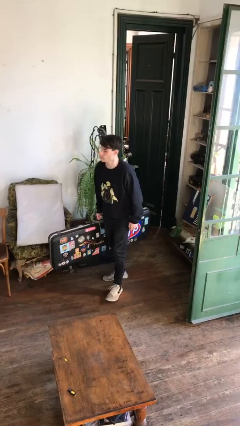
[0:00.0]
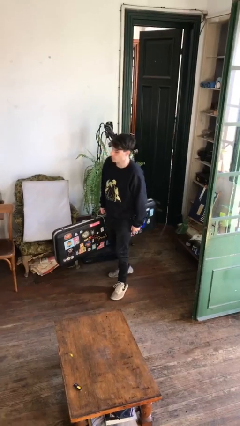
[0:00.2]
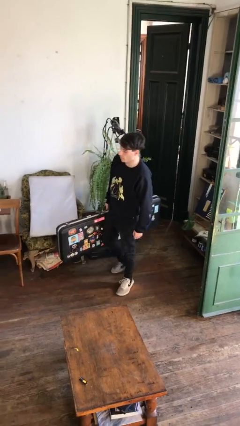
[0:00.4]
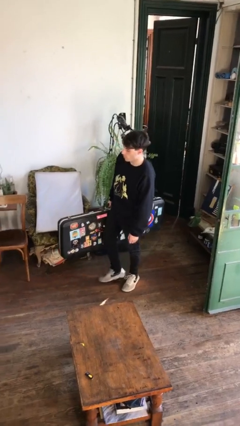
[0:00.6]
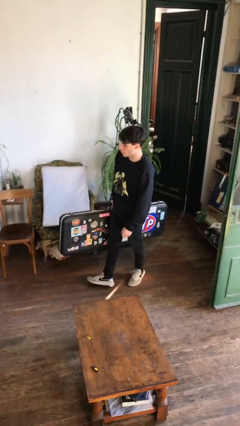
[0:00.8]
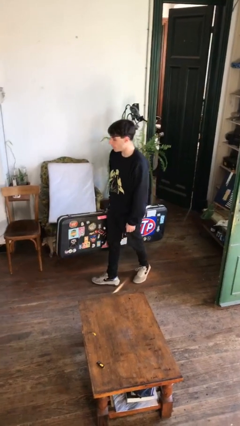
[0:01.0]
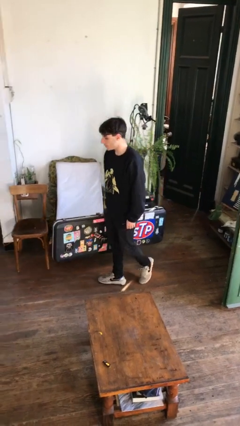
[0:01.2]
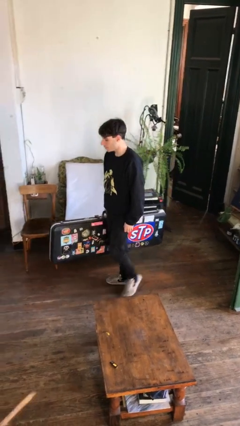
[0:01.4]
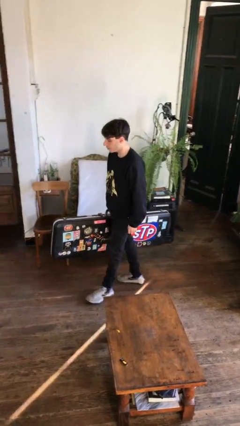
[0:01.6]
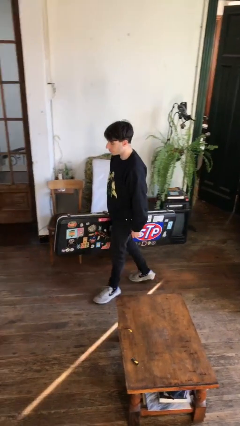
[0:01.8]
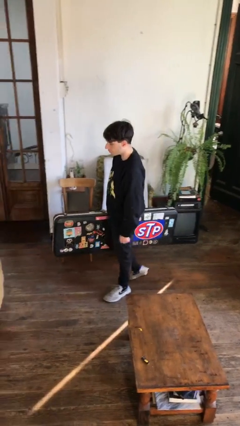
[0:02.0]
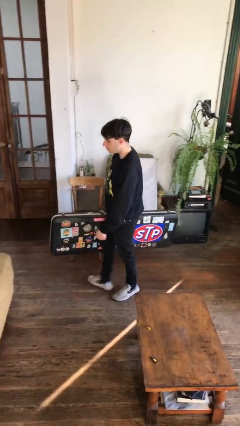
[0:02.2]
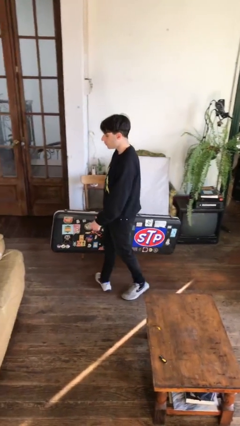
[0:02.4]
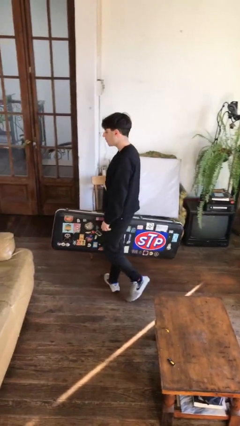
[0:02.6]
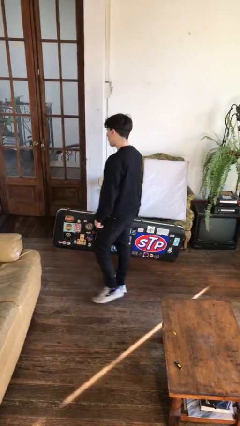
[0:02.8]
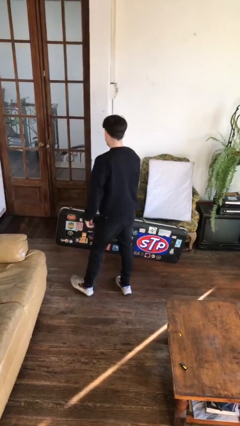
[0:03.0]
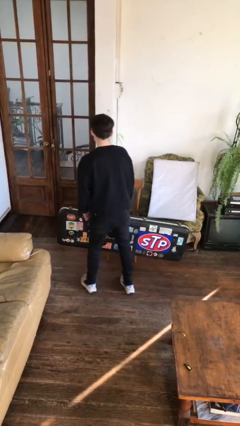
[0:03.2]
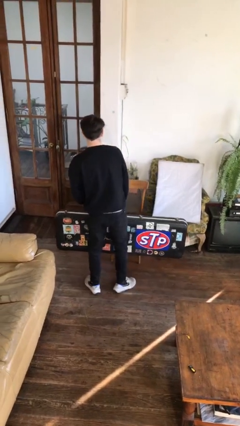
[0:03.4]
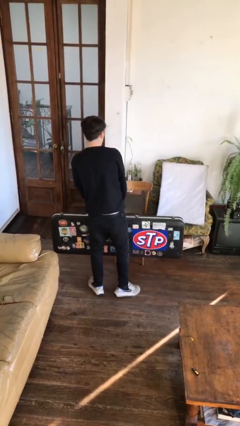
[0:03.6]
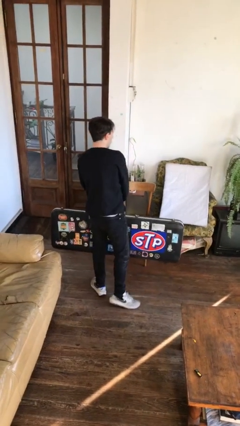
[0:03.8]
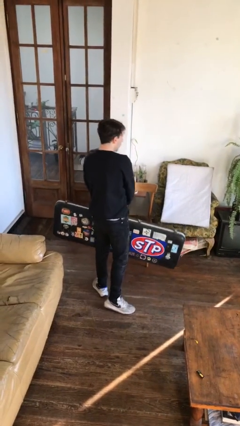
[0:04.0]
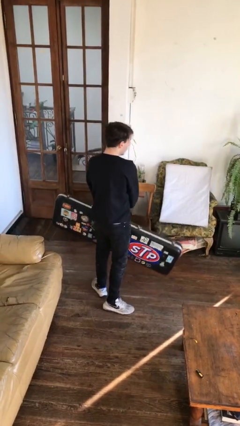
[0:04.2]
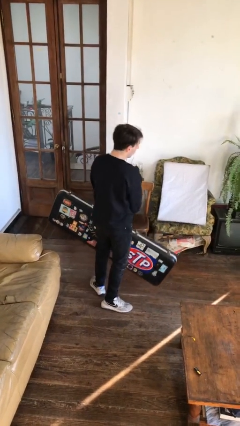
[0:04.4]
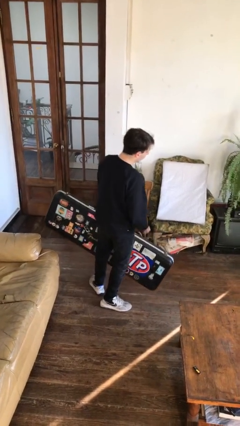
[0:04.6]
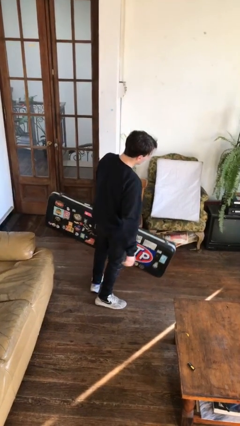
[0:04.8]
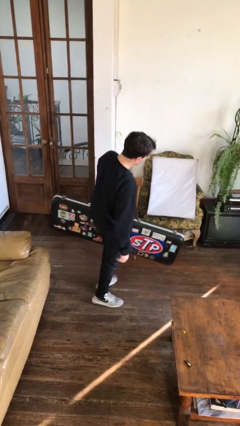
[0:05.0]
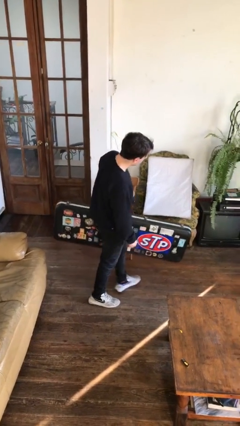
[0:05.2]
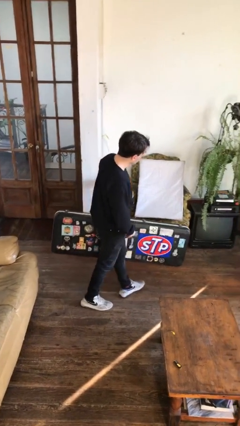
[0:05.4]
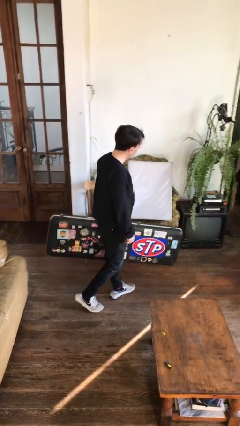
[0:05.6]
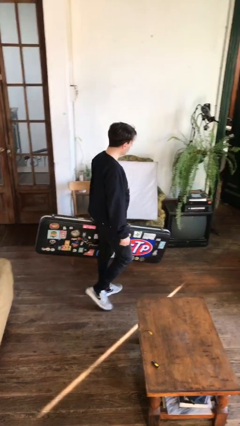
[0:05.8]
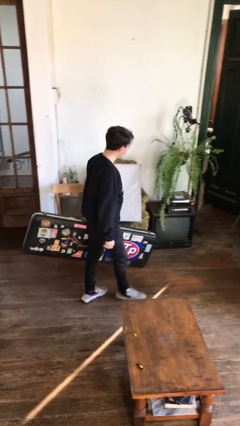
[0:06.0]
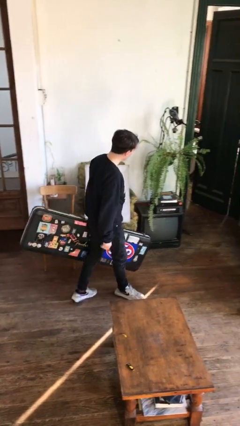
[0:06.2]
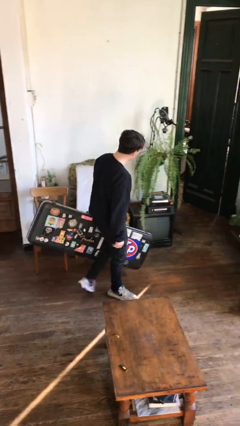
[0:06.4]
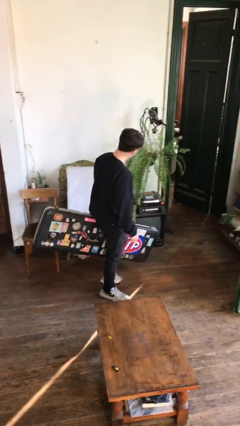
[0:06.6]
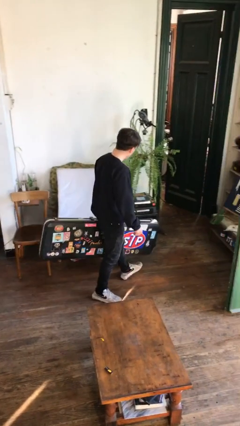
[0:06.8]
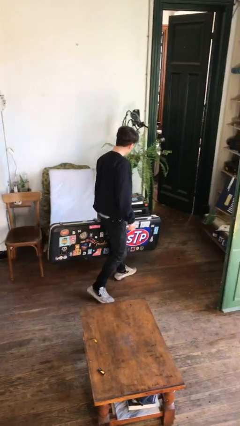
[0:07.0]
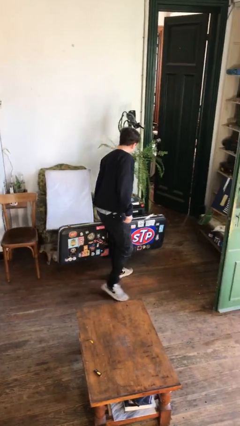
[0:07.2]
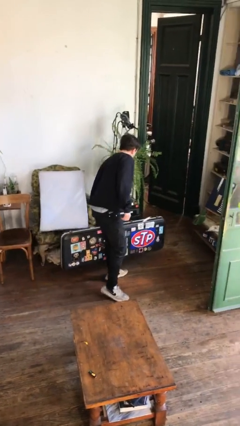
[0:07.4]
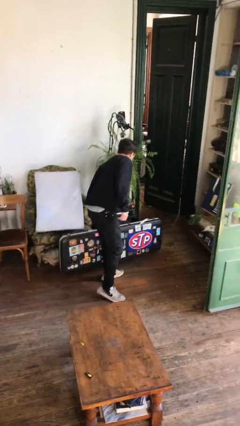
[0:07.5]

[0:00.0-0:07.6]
person carries heavy object

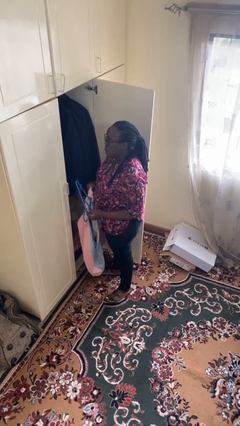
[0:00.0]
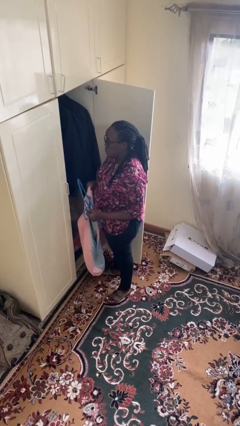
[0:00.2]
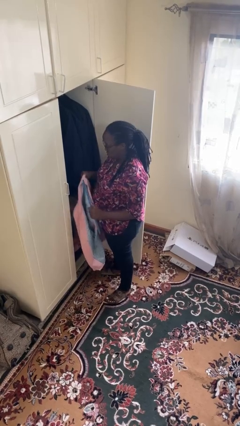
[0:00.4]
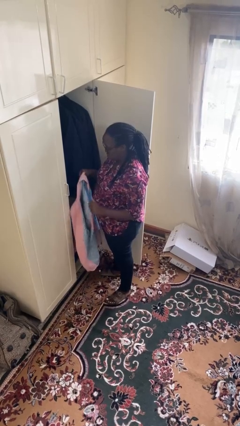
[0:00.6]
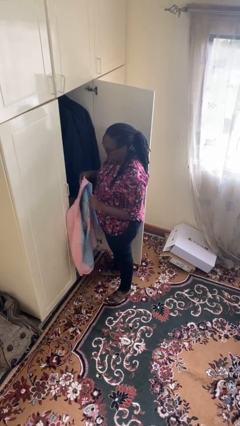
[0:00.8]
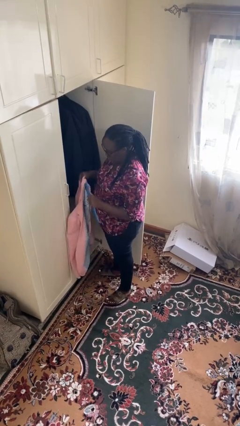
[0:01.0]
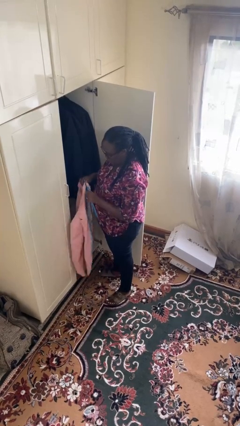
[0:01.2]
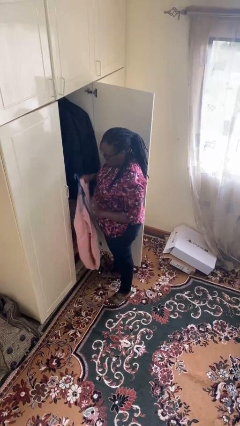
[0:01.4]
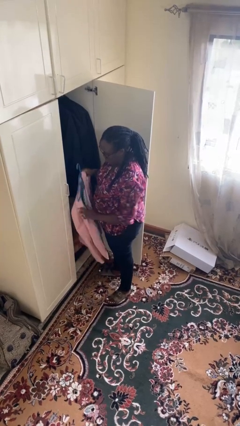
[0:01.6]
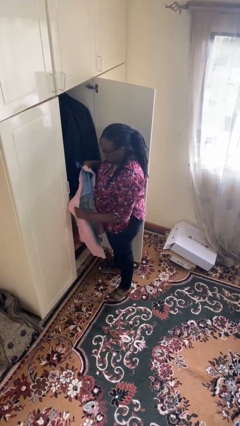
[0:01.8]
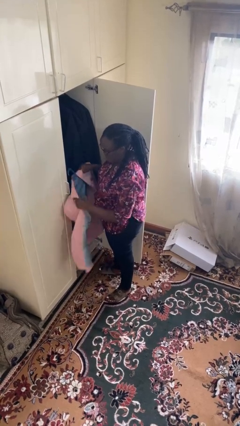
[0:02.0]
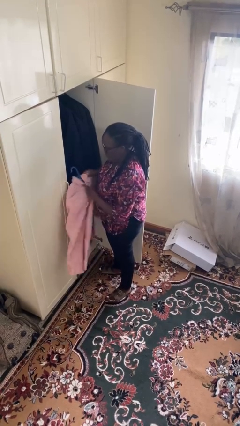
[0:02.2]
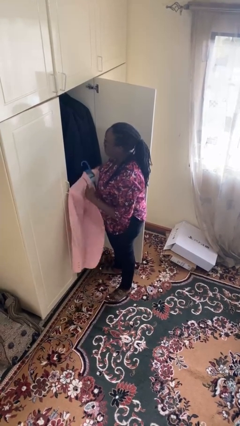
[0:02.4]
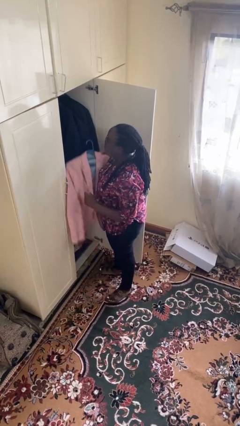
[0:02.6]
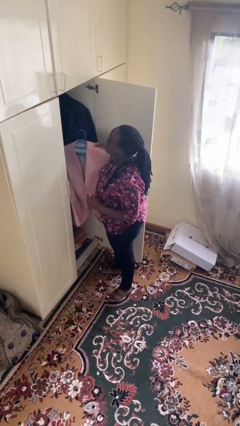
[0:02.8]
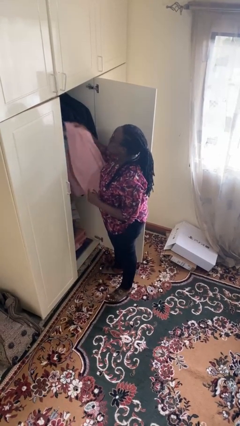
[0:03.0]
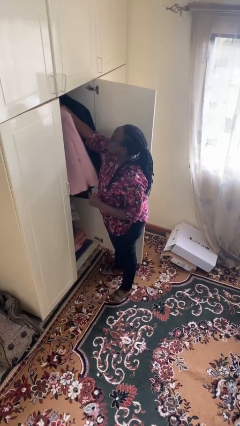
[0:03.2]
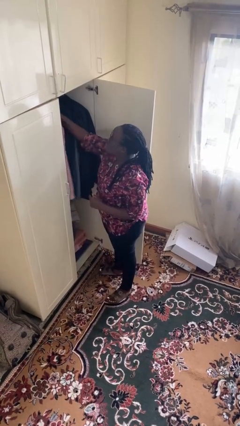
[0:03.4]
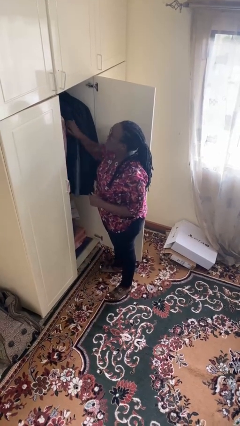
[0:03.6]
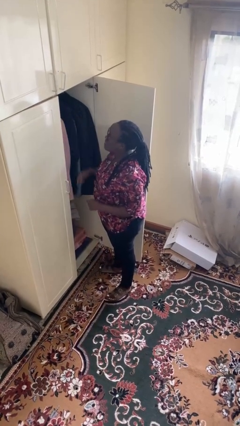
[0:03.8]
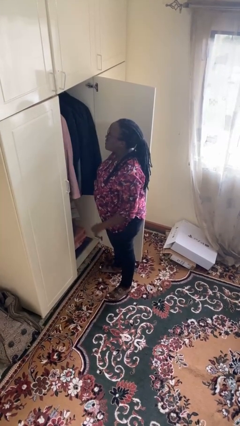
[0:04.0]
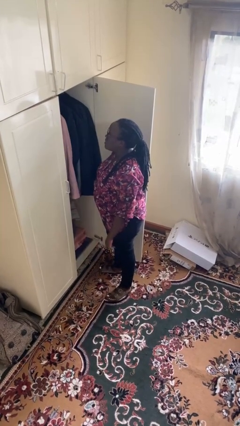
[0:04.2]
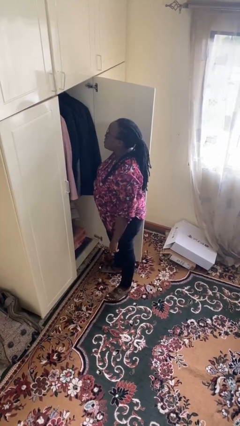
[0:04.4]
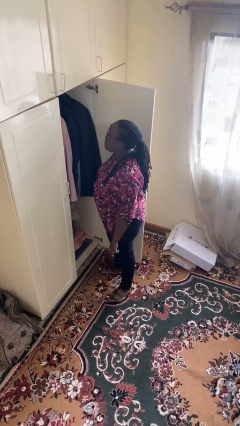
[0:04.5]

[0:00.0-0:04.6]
person puts clothes into closet

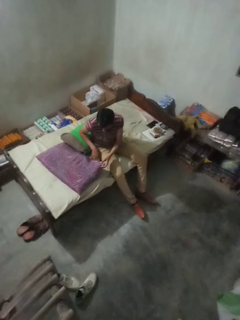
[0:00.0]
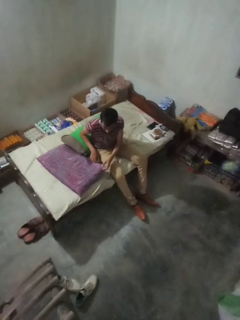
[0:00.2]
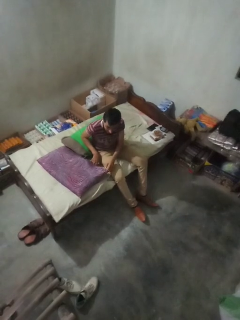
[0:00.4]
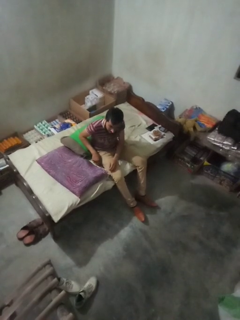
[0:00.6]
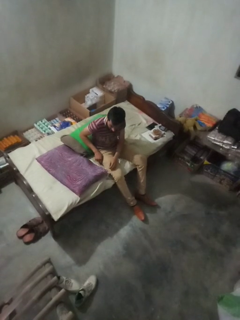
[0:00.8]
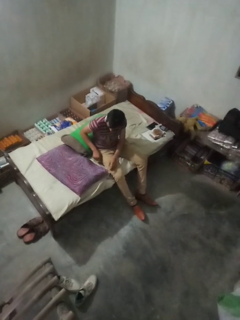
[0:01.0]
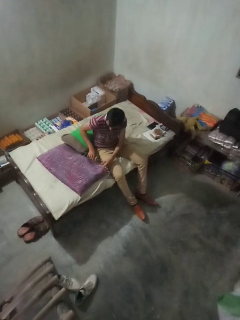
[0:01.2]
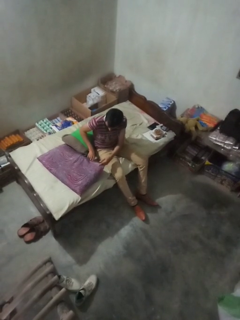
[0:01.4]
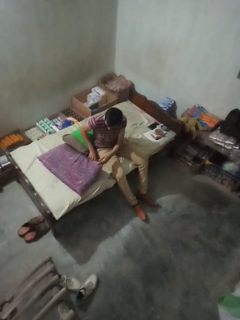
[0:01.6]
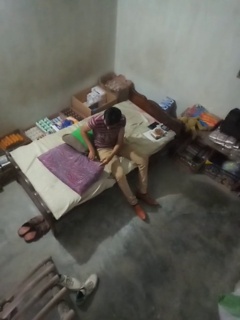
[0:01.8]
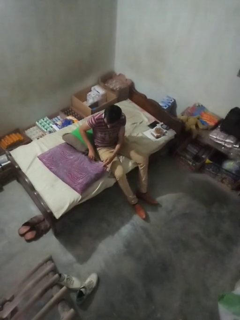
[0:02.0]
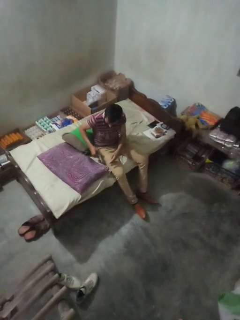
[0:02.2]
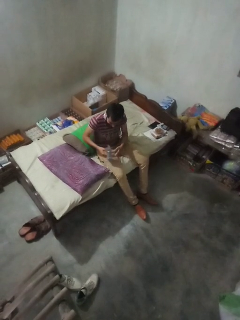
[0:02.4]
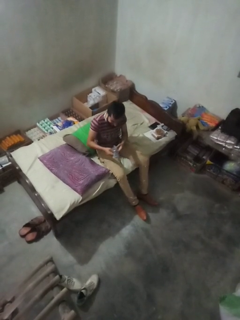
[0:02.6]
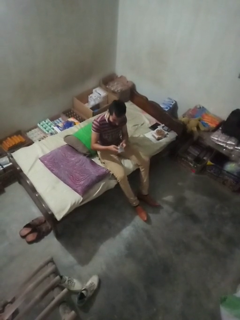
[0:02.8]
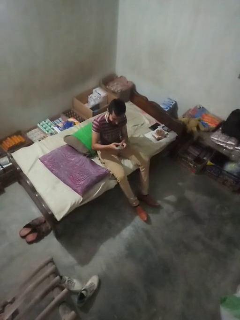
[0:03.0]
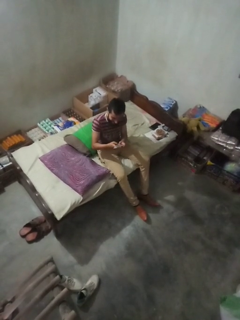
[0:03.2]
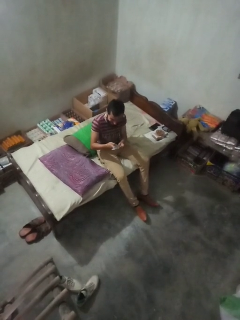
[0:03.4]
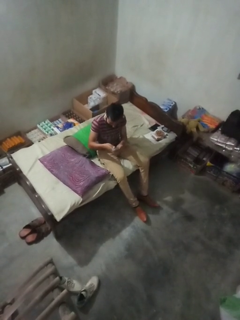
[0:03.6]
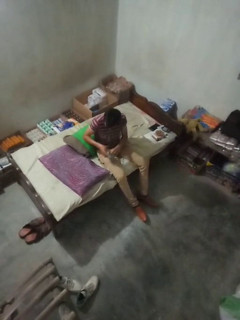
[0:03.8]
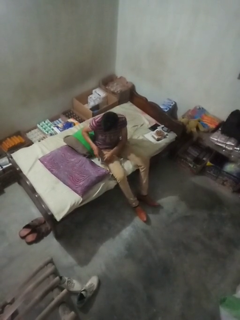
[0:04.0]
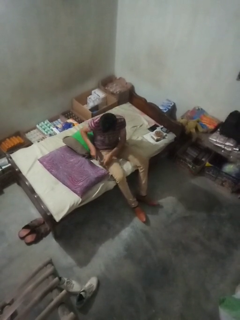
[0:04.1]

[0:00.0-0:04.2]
person searches in couch

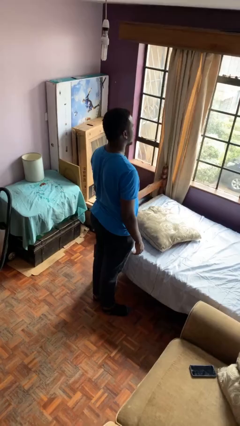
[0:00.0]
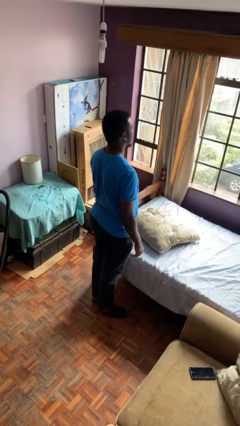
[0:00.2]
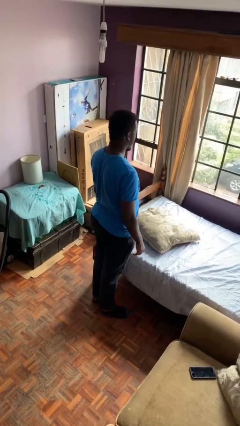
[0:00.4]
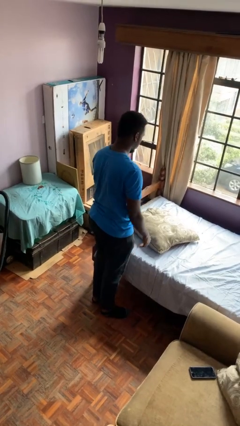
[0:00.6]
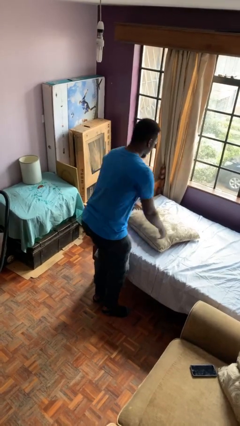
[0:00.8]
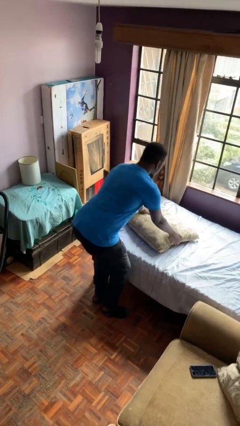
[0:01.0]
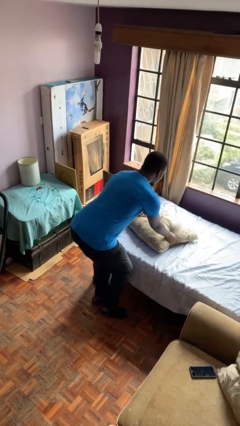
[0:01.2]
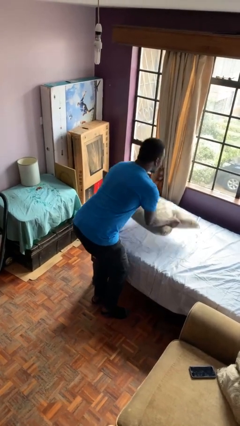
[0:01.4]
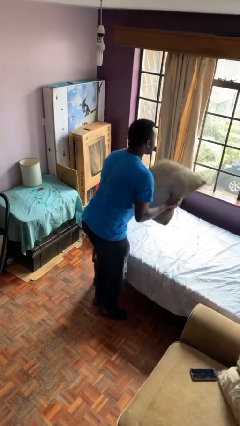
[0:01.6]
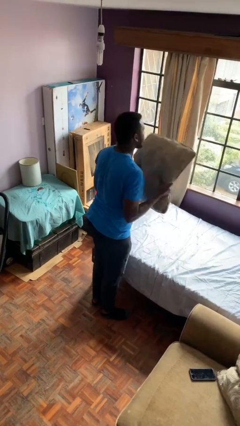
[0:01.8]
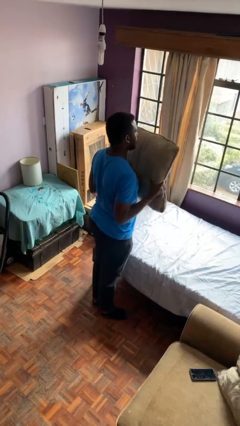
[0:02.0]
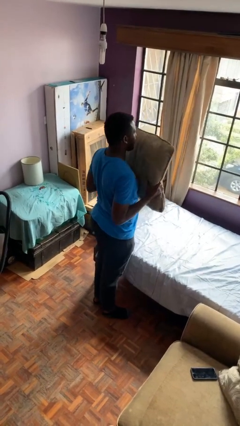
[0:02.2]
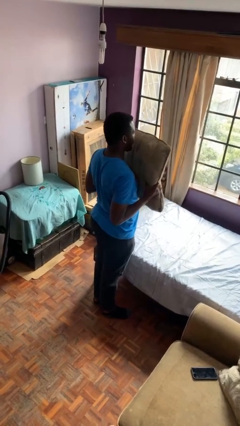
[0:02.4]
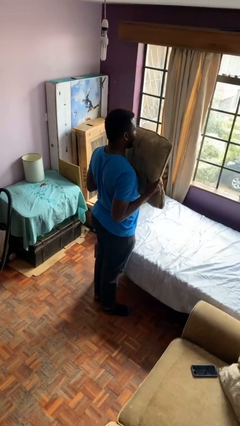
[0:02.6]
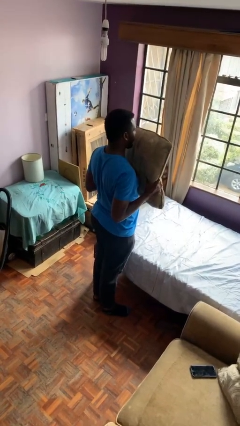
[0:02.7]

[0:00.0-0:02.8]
person picks up object from bed
